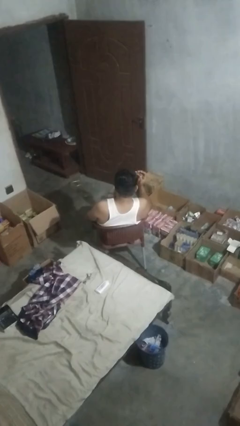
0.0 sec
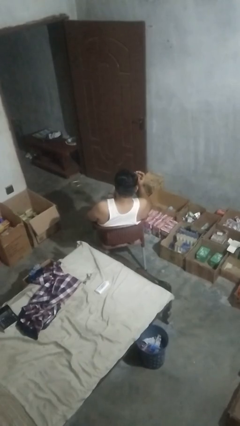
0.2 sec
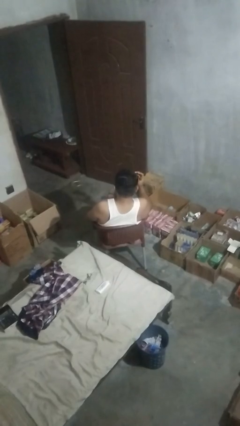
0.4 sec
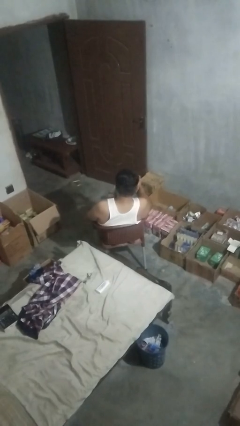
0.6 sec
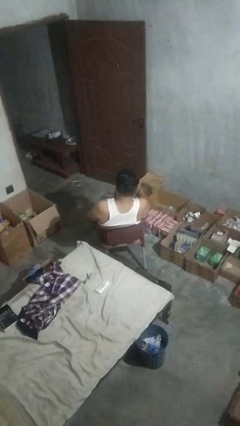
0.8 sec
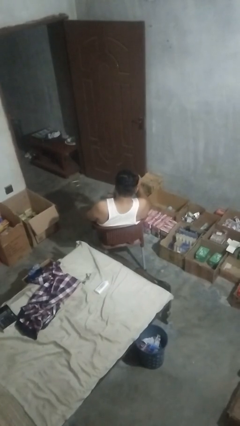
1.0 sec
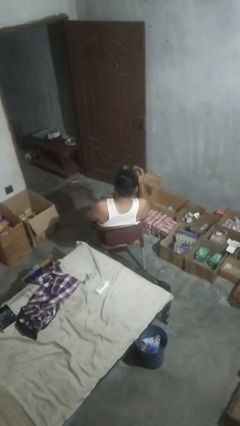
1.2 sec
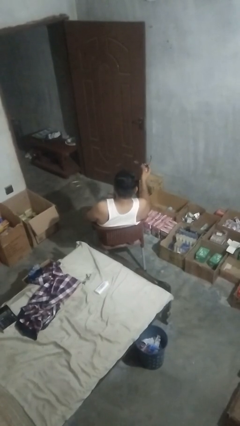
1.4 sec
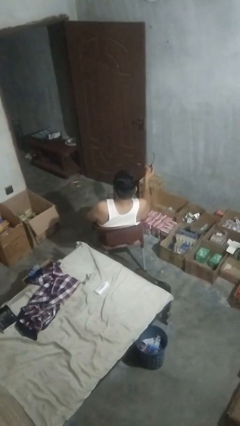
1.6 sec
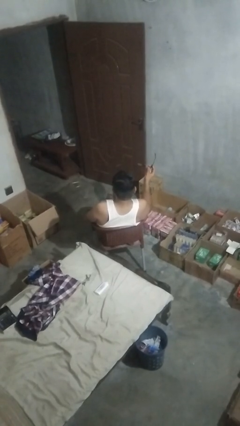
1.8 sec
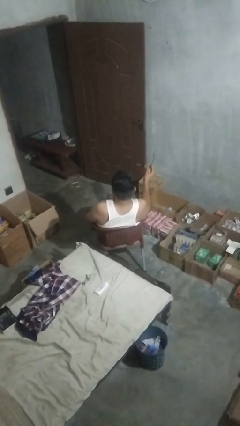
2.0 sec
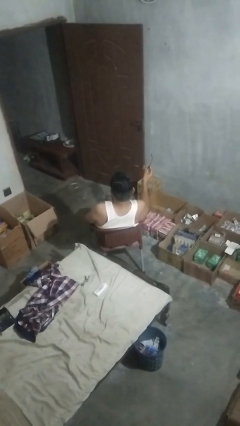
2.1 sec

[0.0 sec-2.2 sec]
person takes off sunglasses

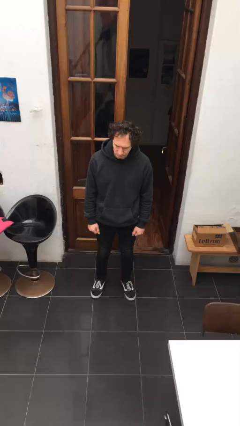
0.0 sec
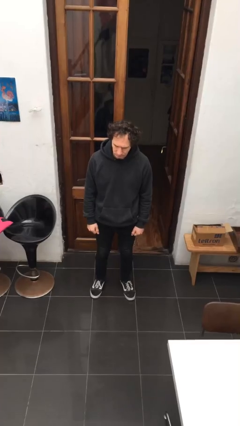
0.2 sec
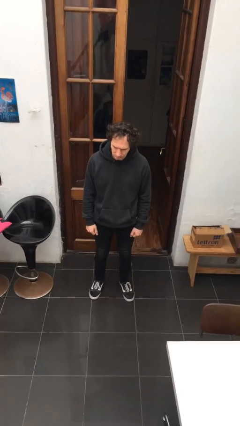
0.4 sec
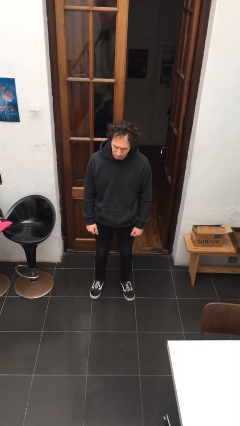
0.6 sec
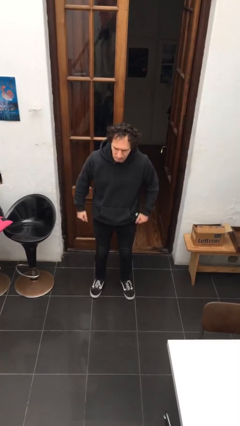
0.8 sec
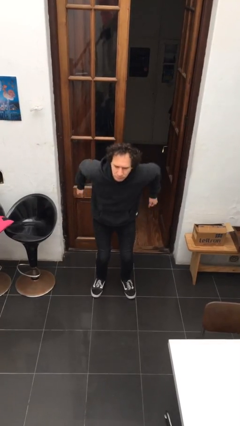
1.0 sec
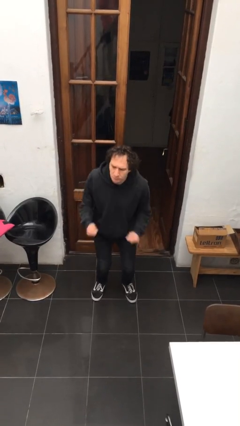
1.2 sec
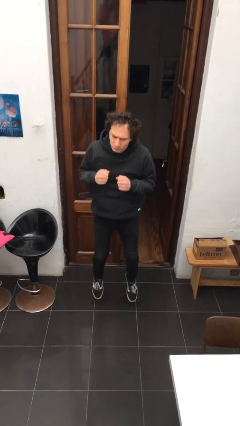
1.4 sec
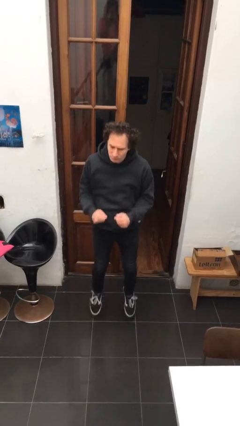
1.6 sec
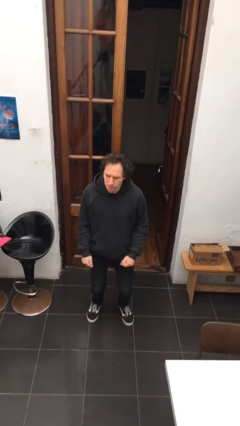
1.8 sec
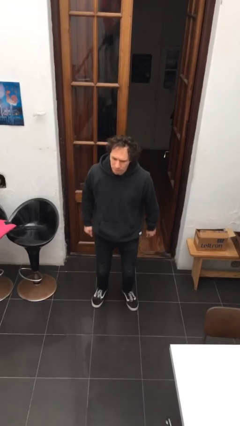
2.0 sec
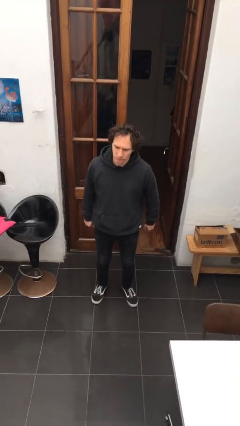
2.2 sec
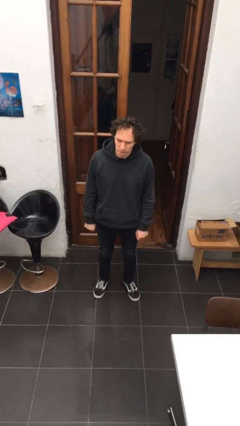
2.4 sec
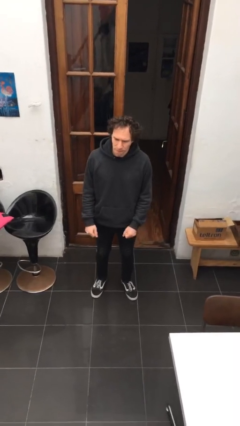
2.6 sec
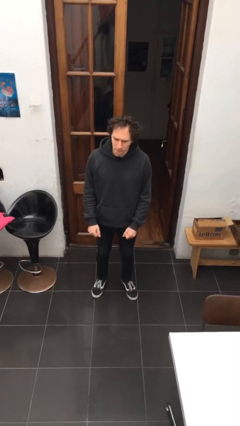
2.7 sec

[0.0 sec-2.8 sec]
person jumps

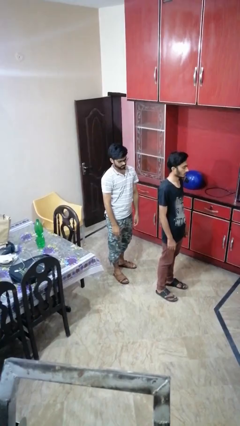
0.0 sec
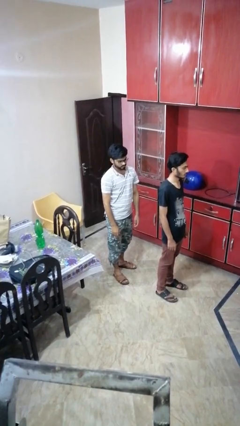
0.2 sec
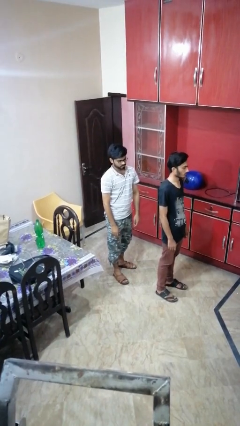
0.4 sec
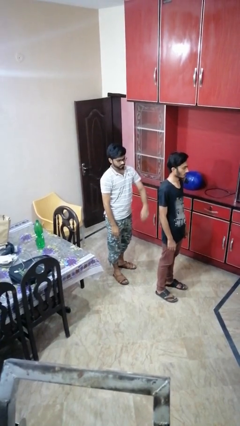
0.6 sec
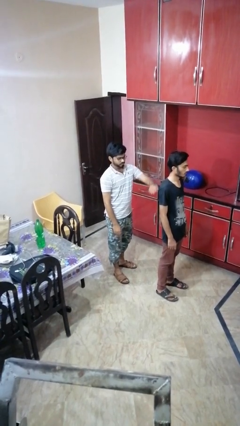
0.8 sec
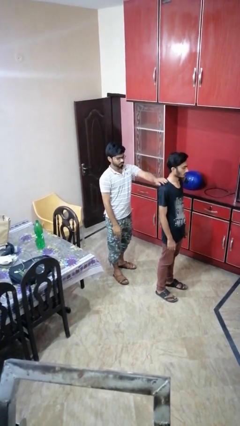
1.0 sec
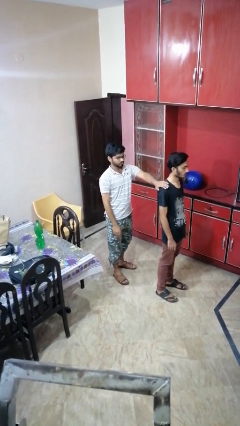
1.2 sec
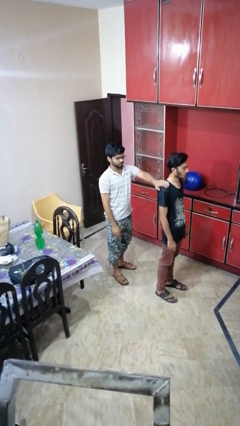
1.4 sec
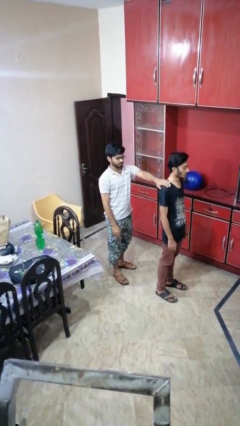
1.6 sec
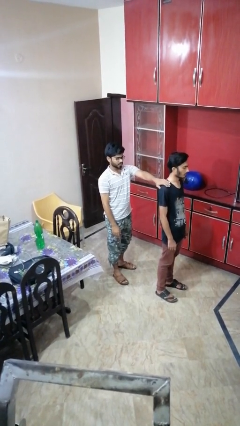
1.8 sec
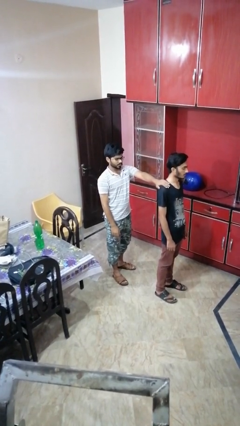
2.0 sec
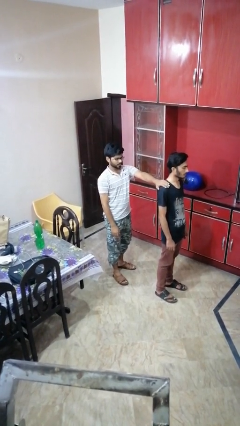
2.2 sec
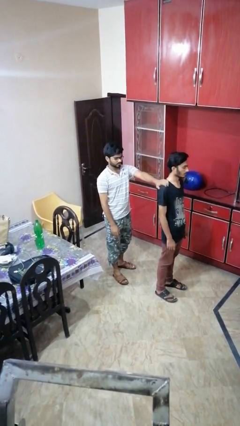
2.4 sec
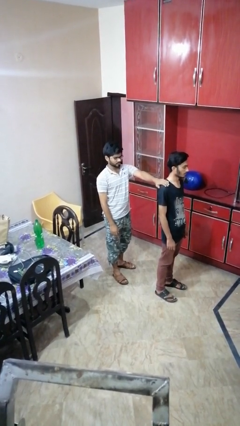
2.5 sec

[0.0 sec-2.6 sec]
person touches back of person

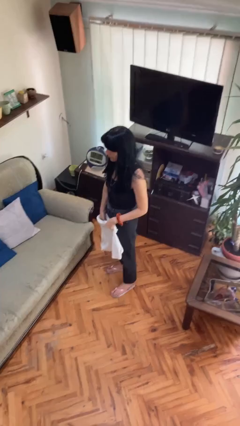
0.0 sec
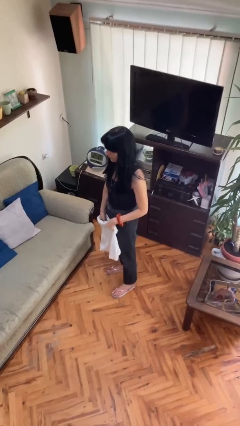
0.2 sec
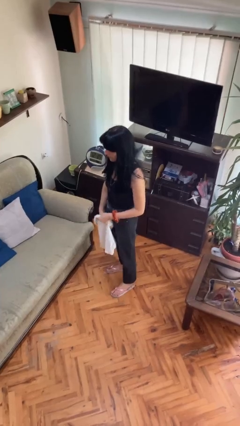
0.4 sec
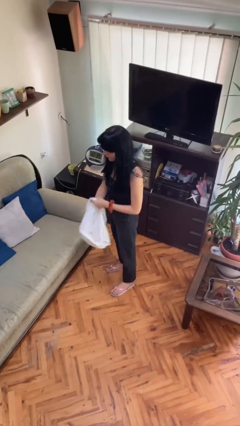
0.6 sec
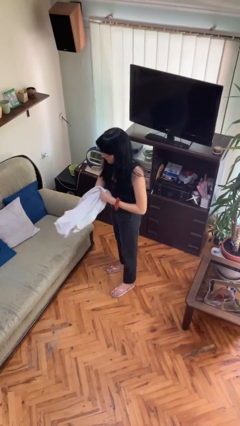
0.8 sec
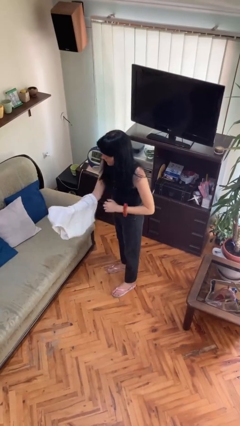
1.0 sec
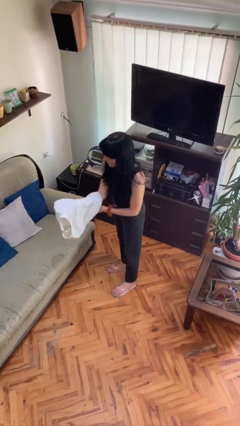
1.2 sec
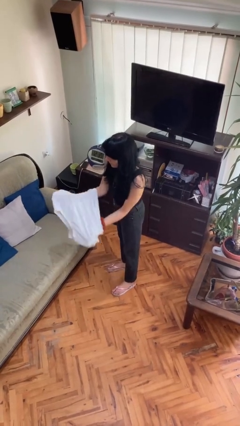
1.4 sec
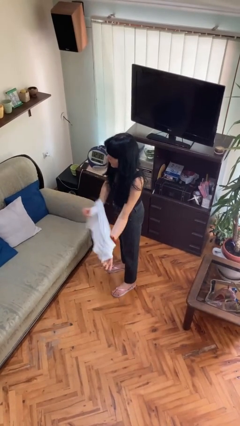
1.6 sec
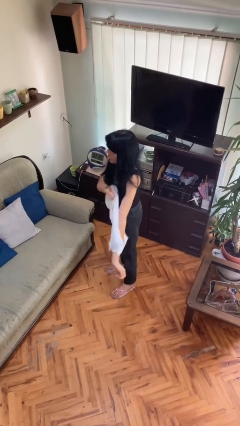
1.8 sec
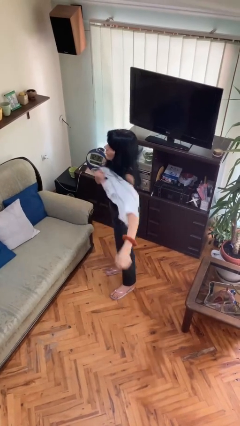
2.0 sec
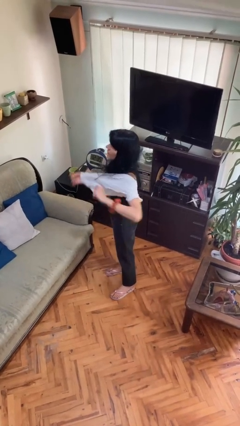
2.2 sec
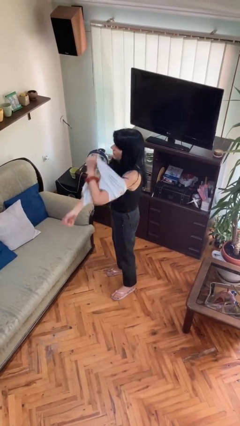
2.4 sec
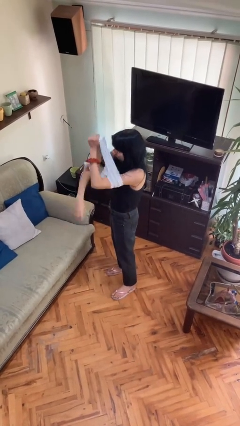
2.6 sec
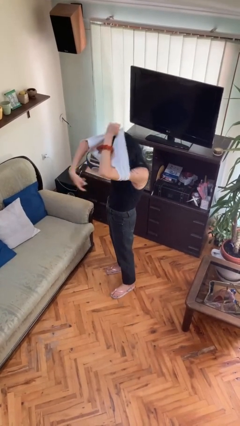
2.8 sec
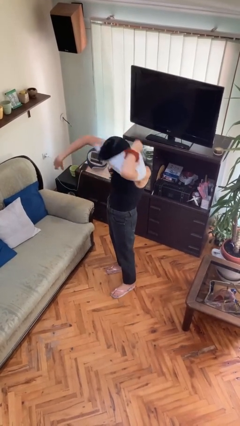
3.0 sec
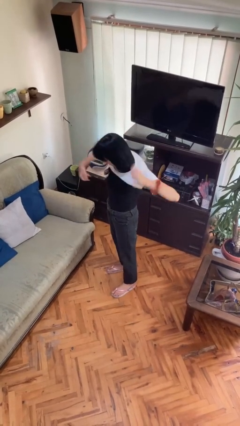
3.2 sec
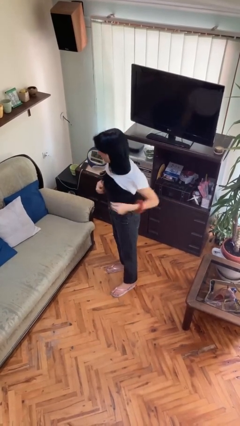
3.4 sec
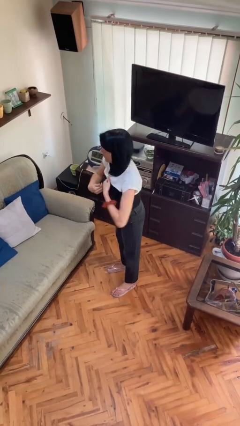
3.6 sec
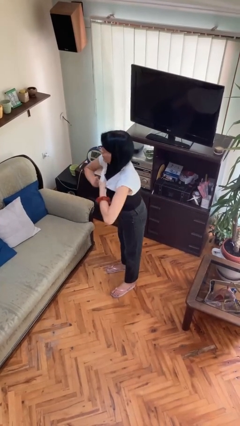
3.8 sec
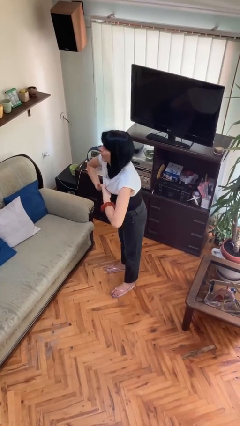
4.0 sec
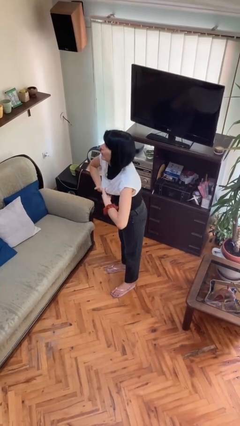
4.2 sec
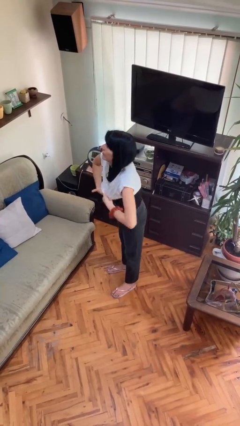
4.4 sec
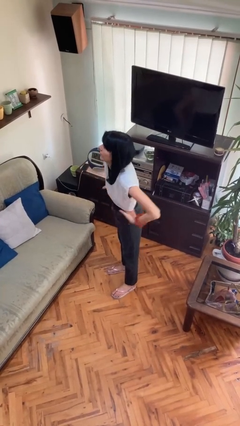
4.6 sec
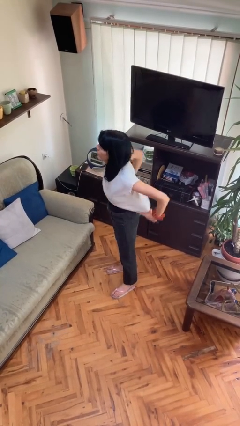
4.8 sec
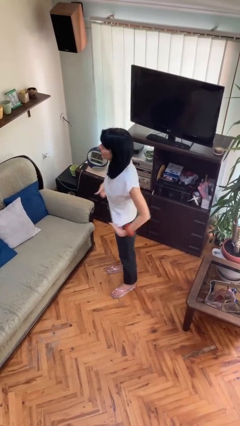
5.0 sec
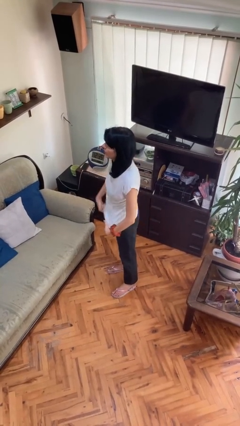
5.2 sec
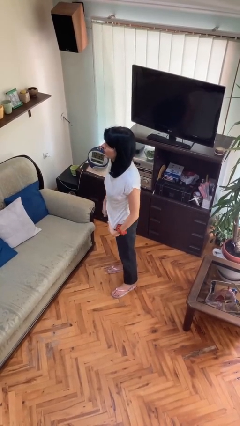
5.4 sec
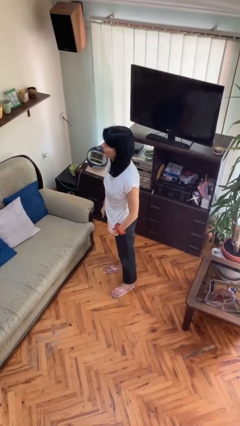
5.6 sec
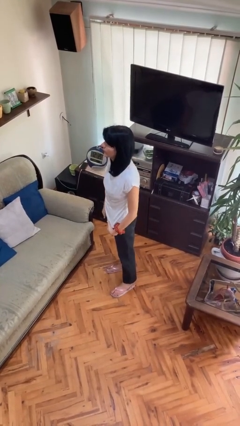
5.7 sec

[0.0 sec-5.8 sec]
person puts on shirt

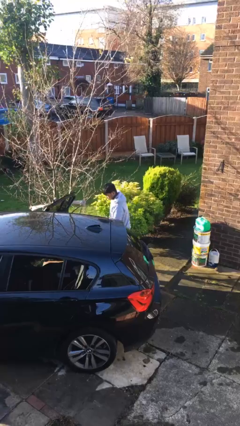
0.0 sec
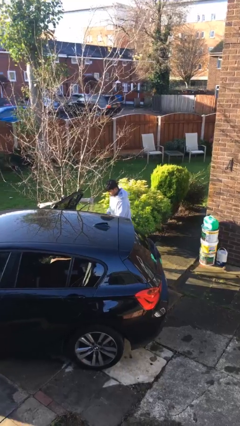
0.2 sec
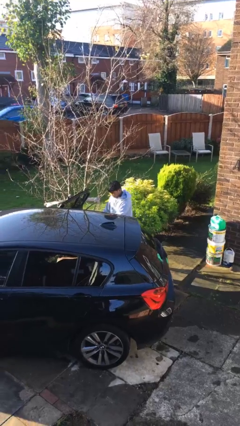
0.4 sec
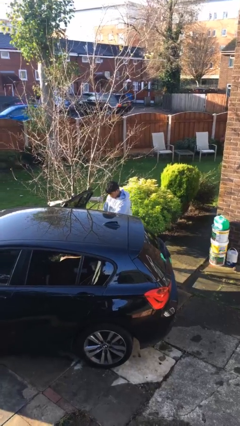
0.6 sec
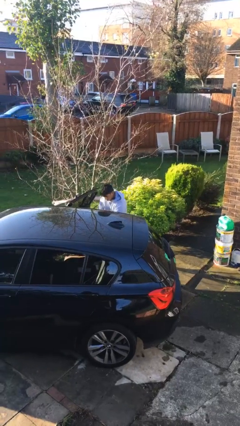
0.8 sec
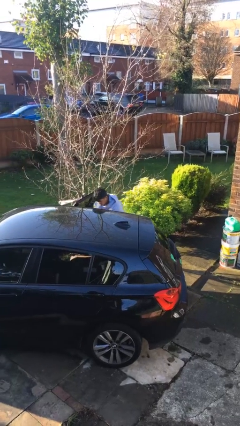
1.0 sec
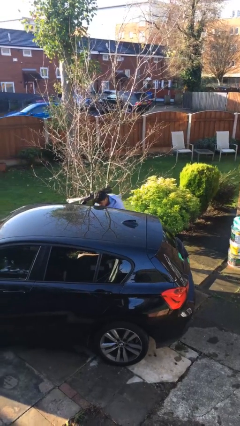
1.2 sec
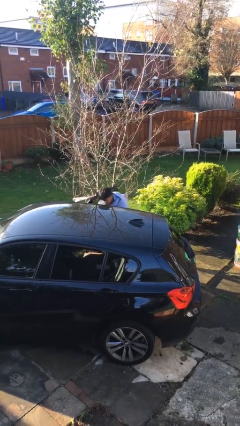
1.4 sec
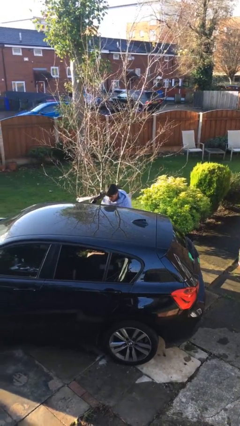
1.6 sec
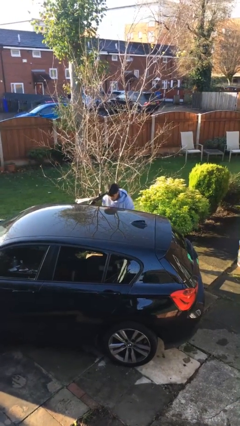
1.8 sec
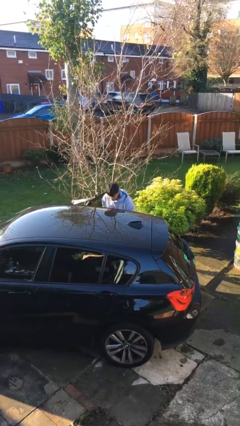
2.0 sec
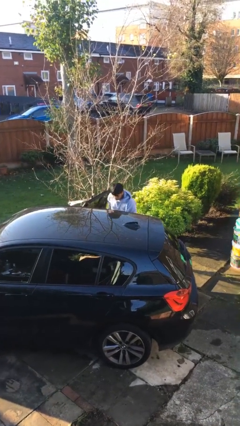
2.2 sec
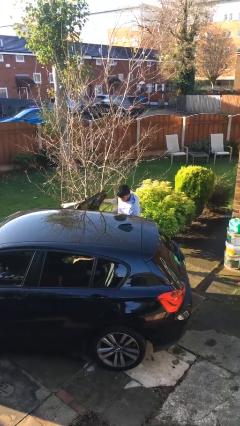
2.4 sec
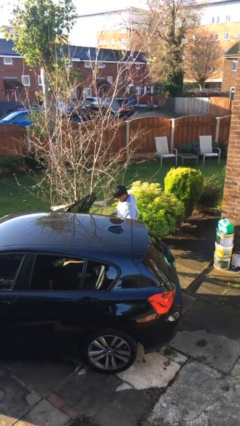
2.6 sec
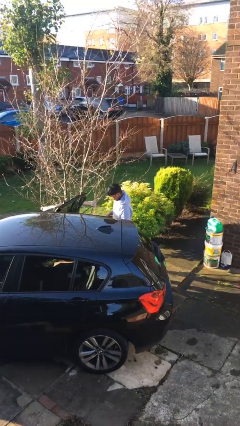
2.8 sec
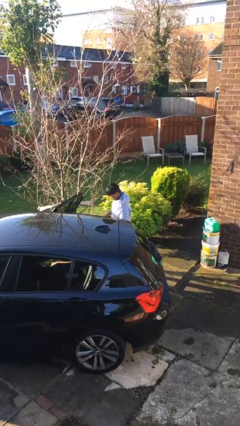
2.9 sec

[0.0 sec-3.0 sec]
person unloads car

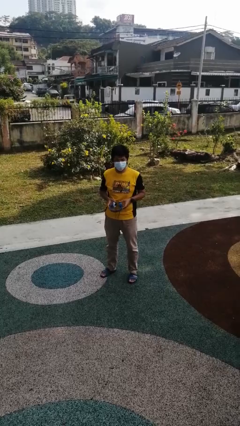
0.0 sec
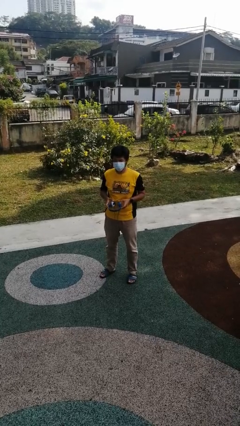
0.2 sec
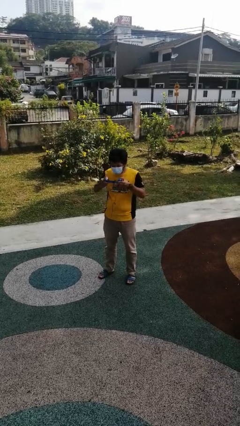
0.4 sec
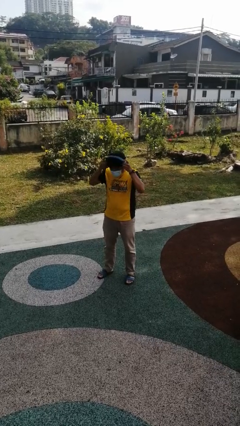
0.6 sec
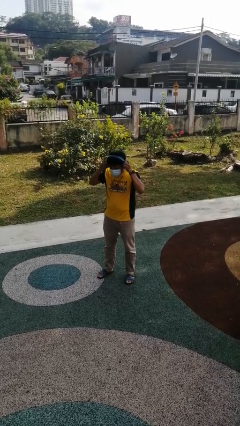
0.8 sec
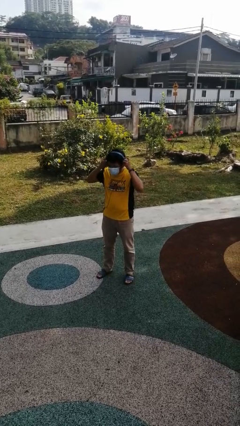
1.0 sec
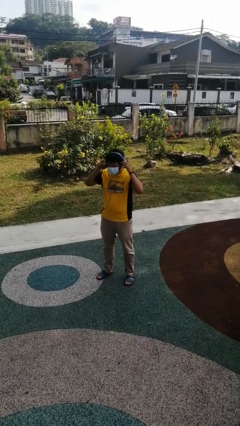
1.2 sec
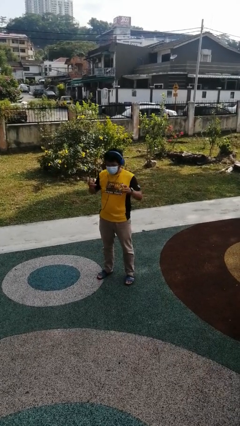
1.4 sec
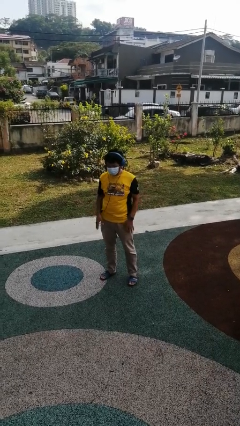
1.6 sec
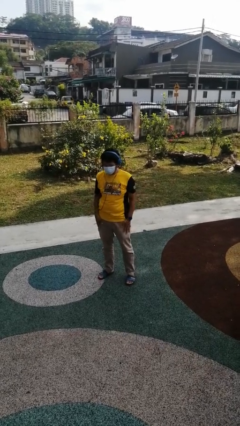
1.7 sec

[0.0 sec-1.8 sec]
person puts on headphones
